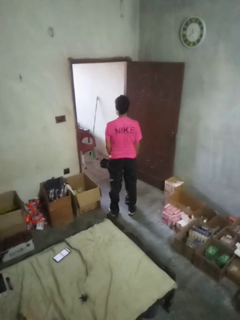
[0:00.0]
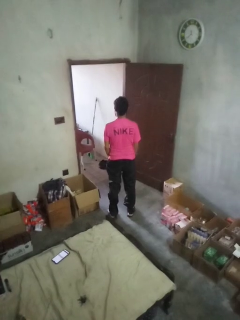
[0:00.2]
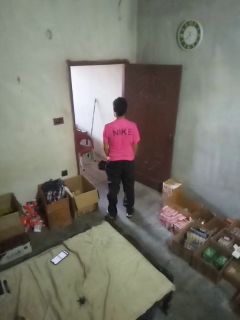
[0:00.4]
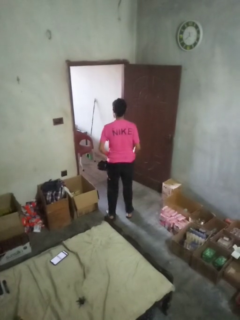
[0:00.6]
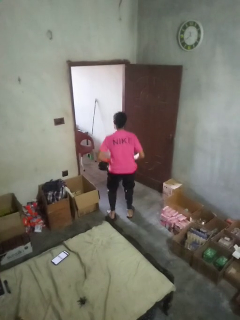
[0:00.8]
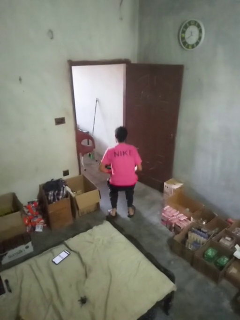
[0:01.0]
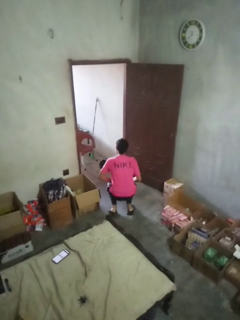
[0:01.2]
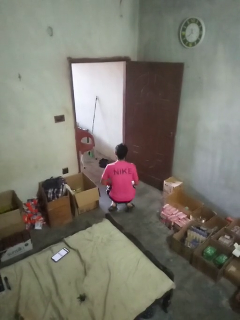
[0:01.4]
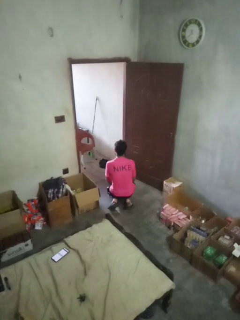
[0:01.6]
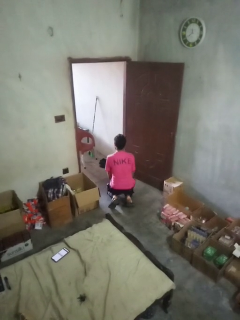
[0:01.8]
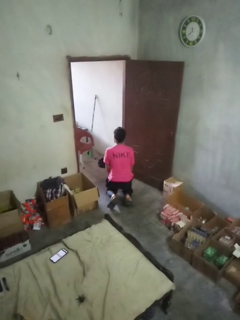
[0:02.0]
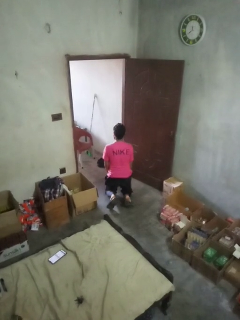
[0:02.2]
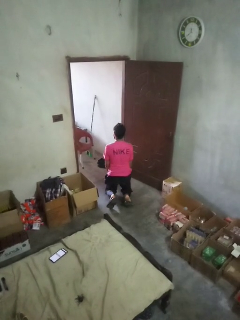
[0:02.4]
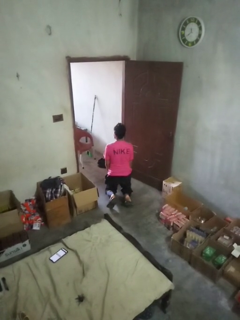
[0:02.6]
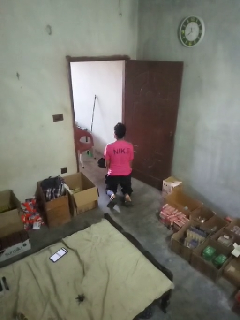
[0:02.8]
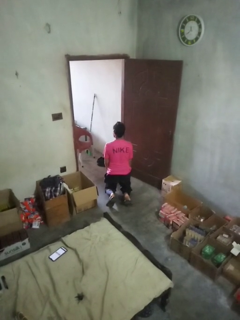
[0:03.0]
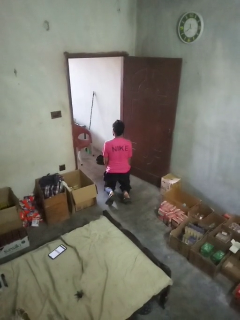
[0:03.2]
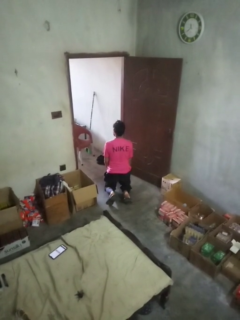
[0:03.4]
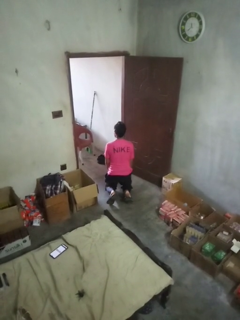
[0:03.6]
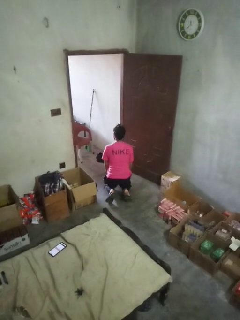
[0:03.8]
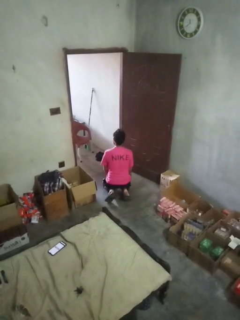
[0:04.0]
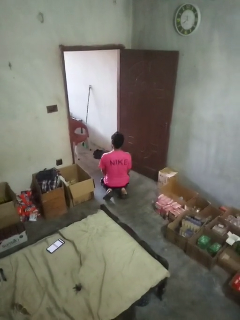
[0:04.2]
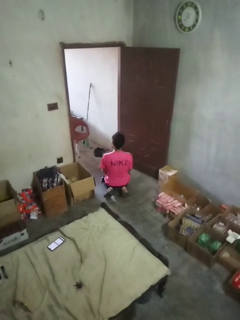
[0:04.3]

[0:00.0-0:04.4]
person kneels

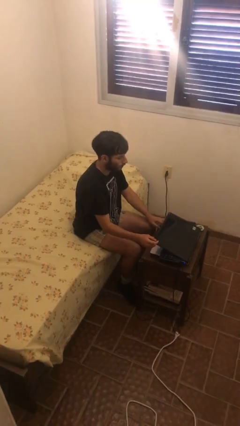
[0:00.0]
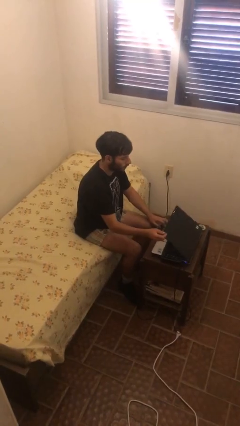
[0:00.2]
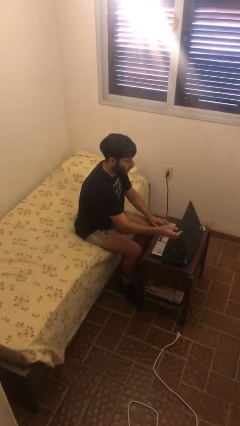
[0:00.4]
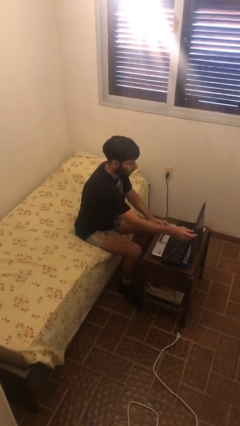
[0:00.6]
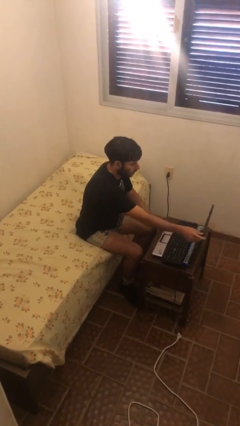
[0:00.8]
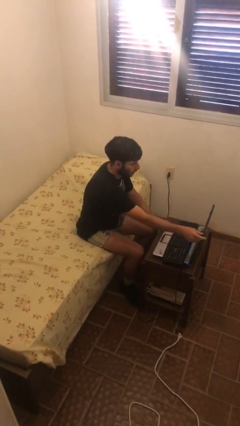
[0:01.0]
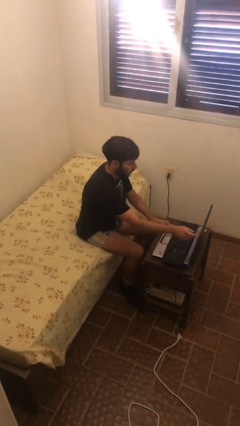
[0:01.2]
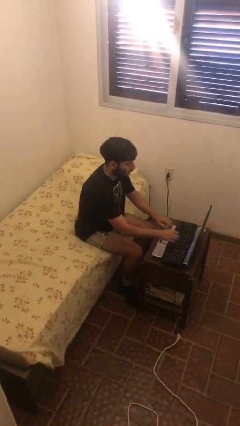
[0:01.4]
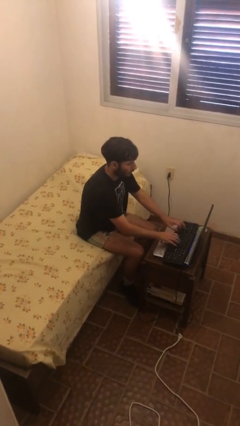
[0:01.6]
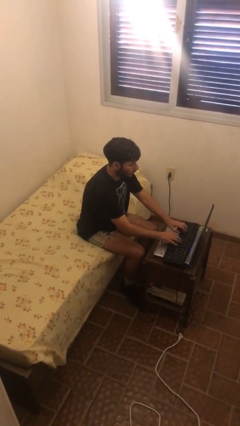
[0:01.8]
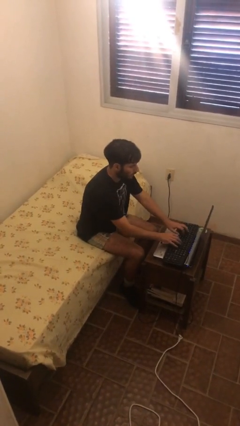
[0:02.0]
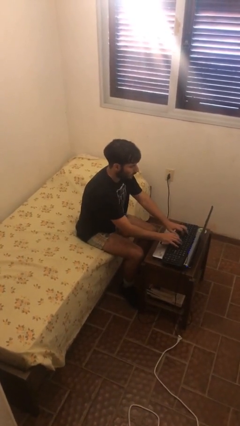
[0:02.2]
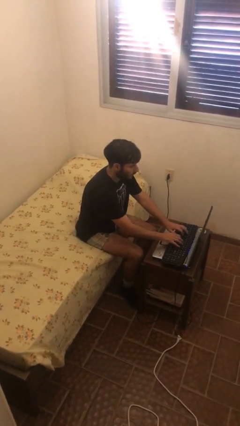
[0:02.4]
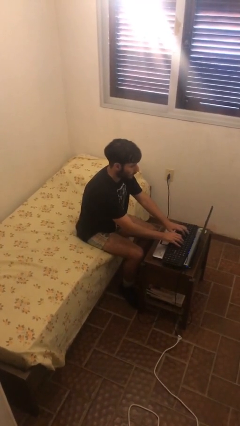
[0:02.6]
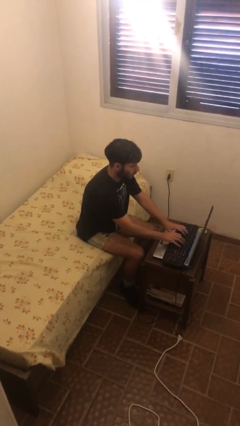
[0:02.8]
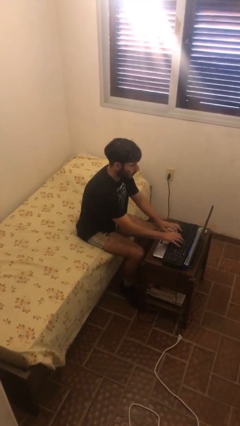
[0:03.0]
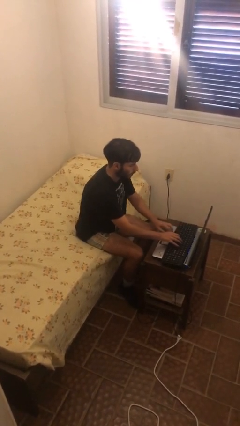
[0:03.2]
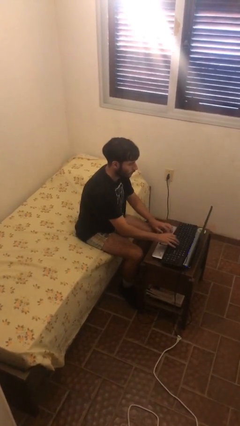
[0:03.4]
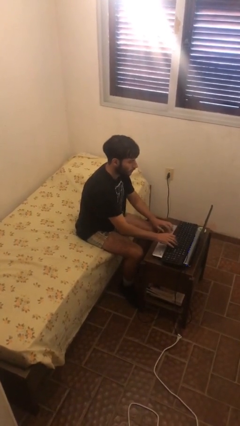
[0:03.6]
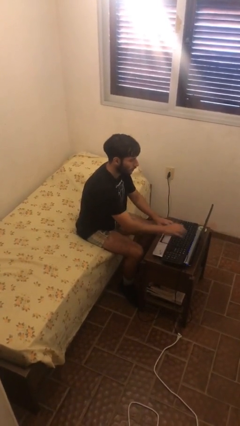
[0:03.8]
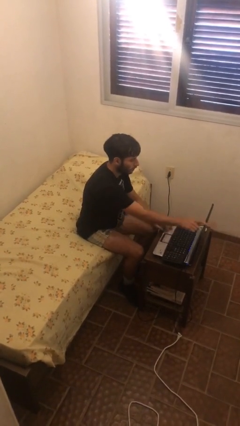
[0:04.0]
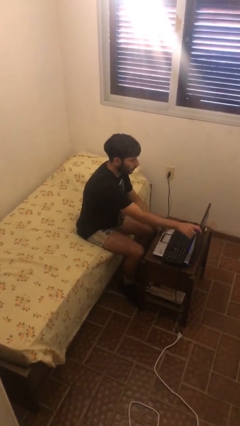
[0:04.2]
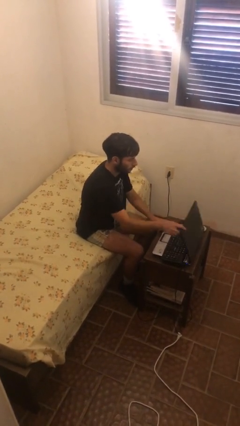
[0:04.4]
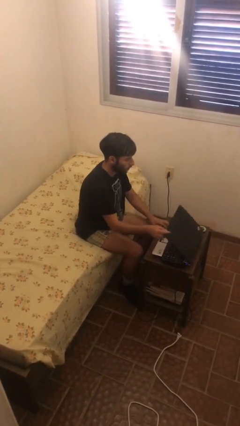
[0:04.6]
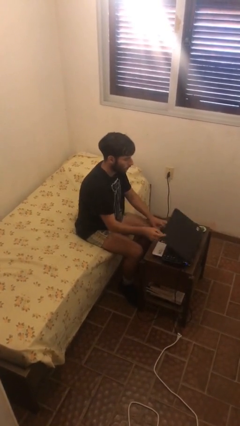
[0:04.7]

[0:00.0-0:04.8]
person interacts with laptop

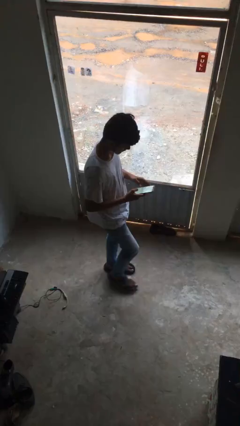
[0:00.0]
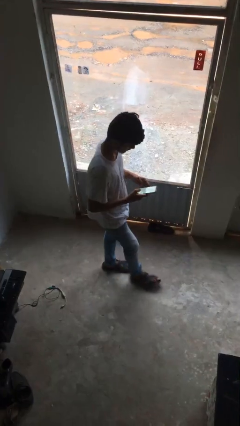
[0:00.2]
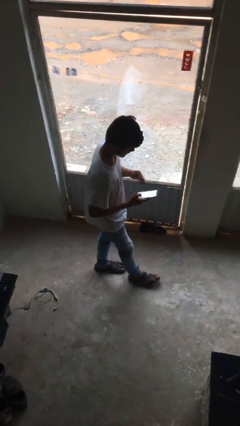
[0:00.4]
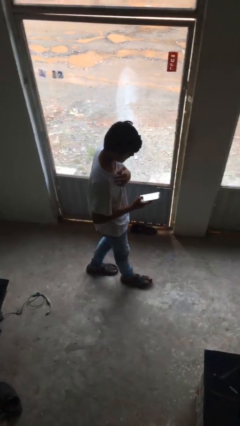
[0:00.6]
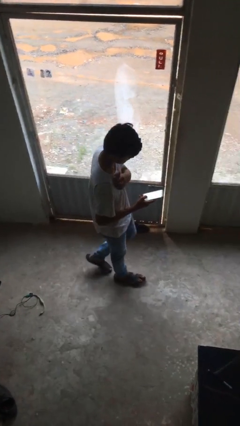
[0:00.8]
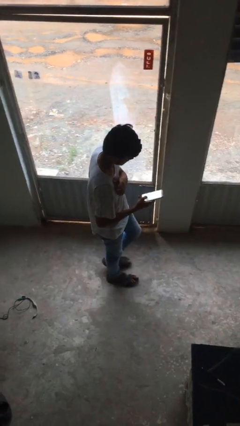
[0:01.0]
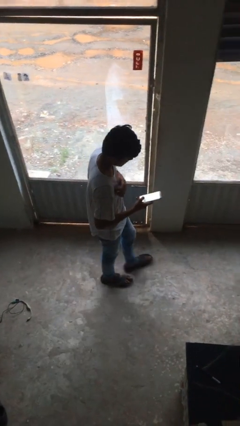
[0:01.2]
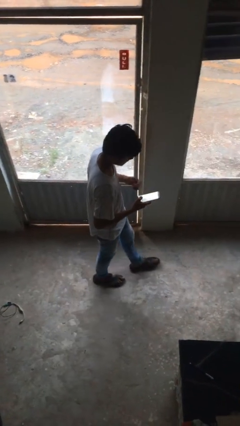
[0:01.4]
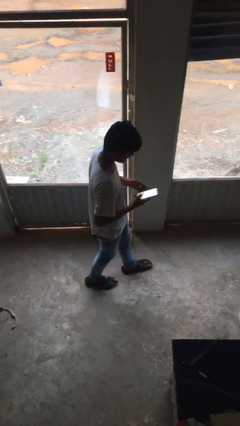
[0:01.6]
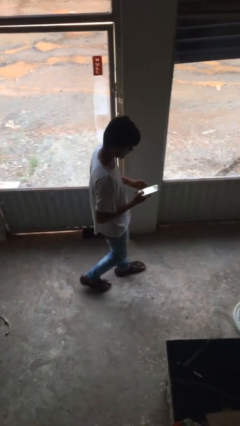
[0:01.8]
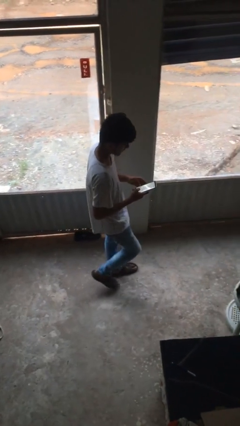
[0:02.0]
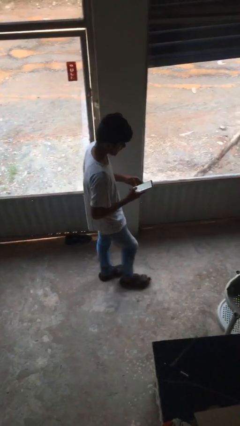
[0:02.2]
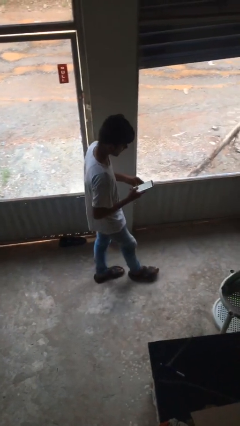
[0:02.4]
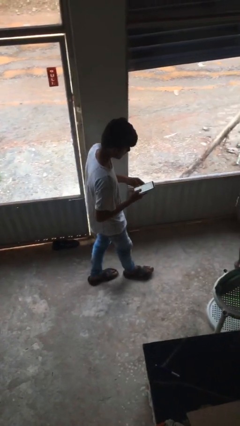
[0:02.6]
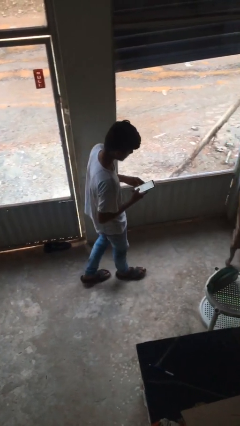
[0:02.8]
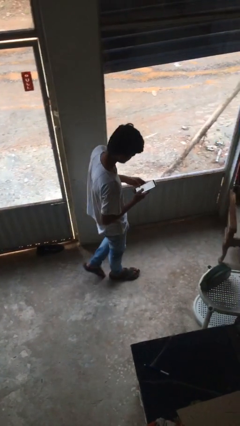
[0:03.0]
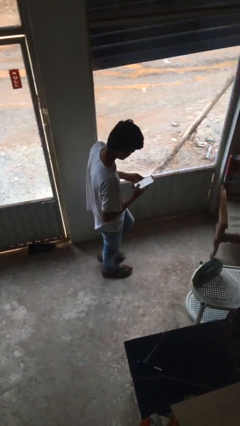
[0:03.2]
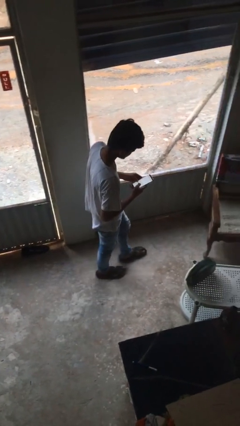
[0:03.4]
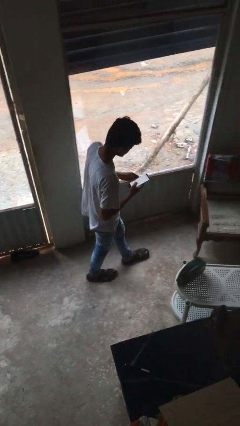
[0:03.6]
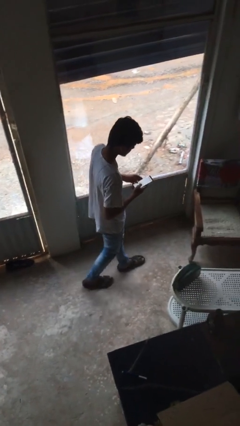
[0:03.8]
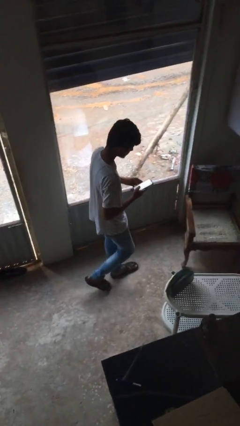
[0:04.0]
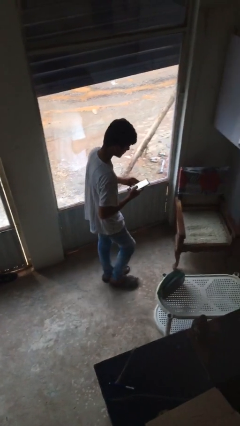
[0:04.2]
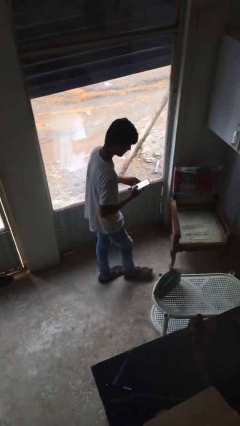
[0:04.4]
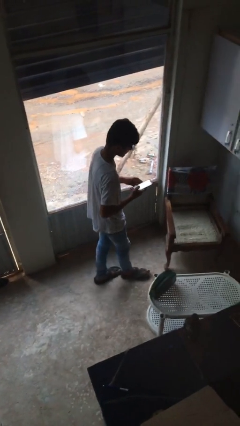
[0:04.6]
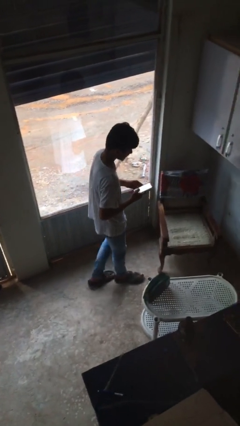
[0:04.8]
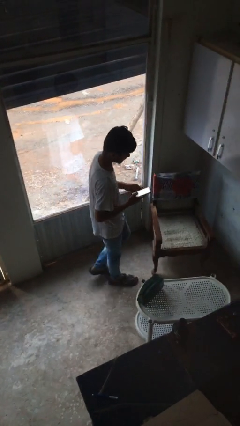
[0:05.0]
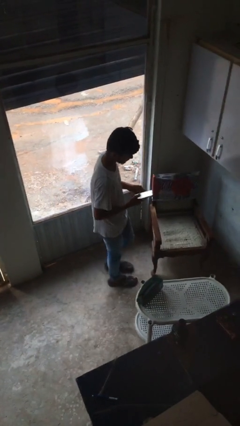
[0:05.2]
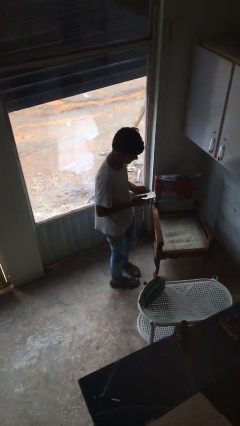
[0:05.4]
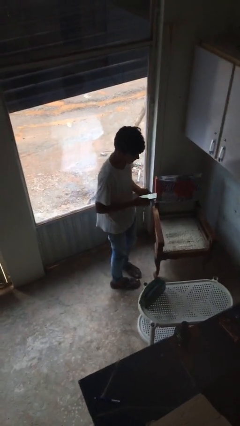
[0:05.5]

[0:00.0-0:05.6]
person texts on phone

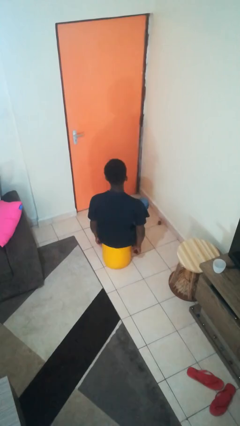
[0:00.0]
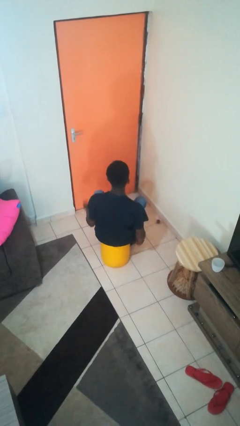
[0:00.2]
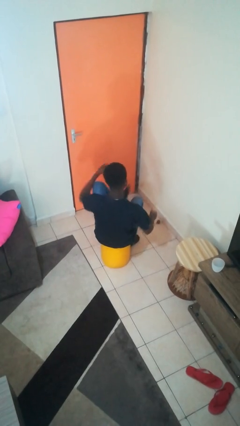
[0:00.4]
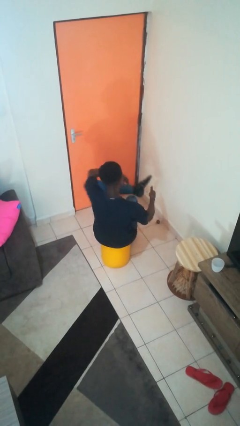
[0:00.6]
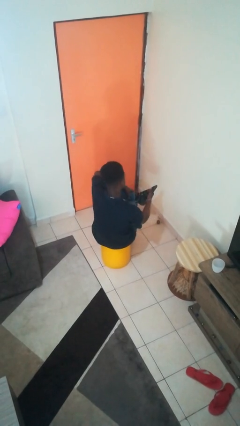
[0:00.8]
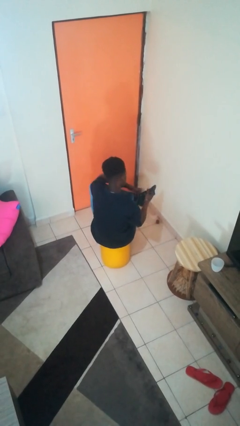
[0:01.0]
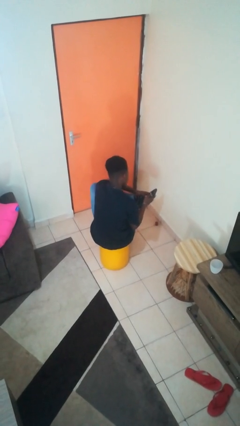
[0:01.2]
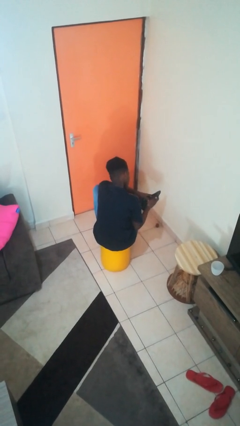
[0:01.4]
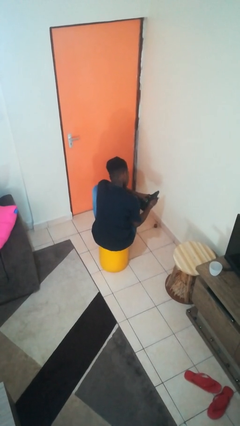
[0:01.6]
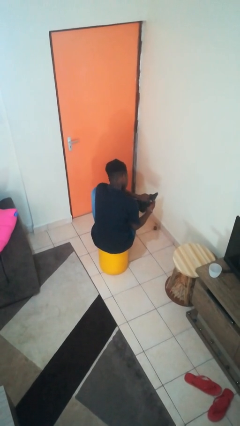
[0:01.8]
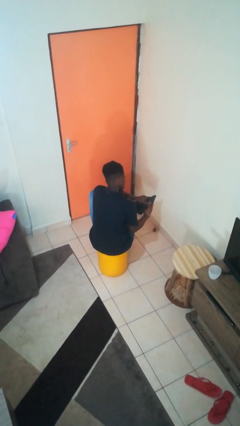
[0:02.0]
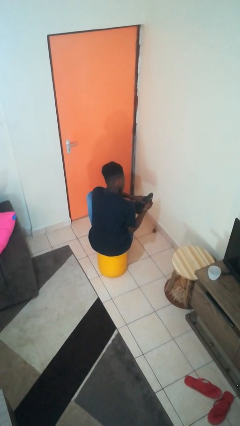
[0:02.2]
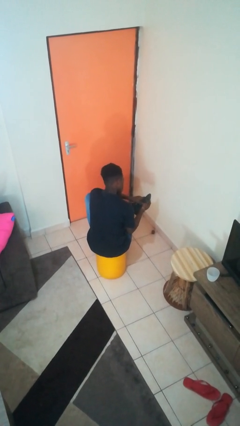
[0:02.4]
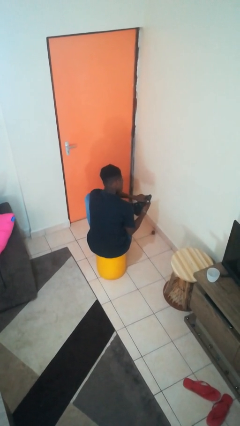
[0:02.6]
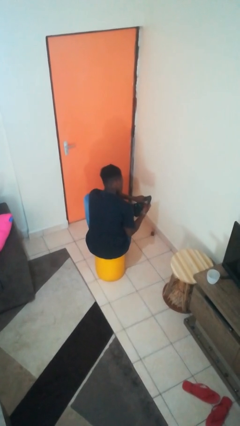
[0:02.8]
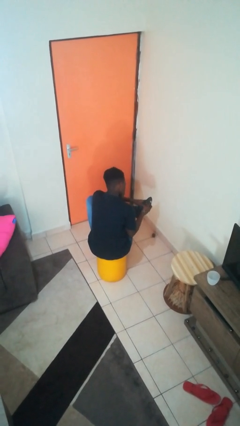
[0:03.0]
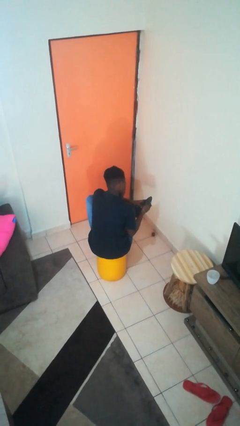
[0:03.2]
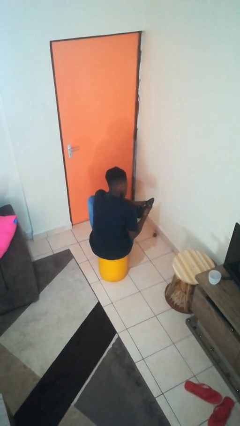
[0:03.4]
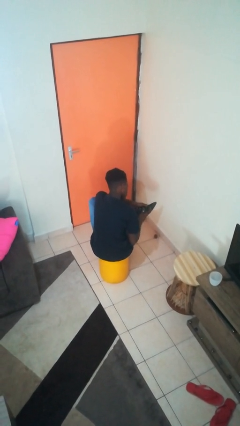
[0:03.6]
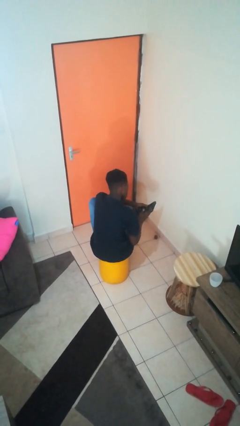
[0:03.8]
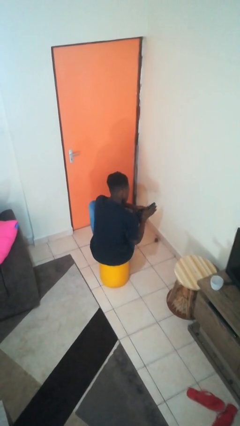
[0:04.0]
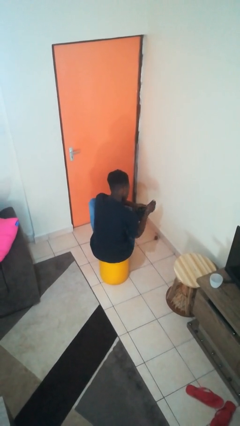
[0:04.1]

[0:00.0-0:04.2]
person rubs foot
